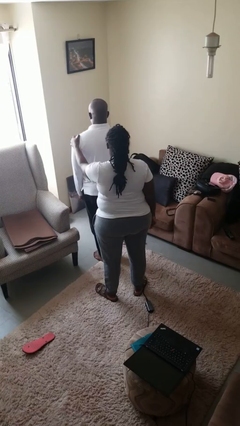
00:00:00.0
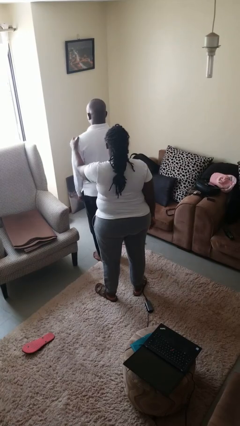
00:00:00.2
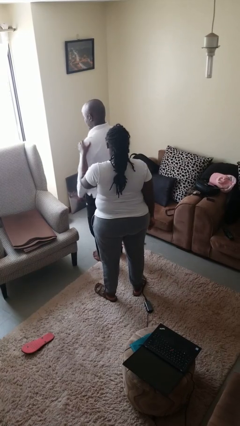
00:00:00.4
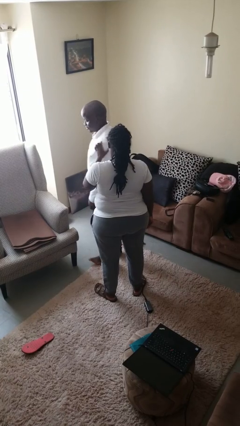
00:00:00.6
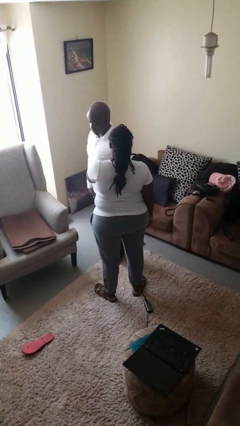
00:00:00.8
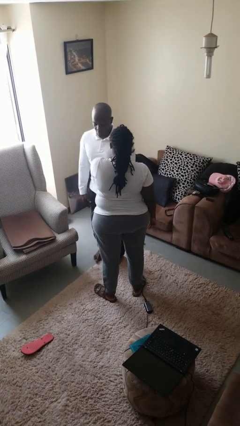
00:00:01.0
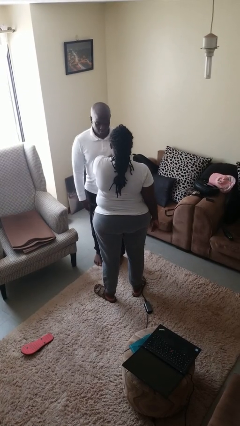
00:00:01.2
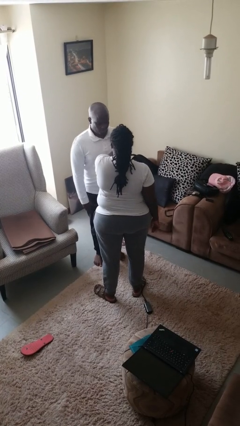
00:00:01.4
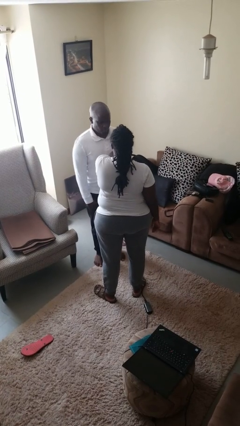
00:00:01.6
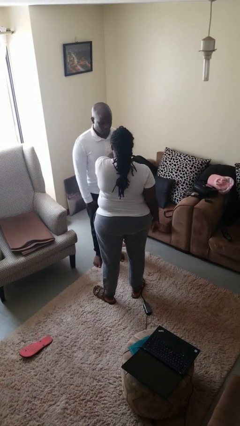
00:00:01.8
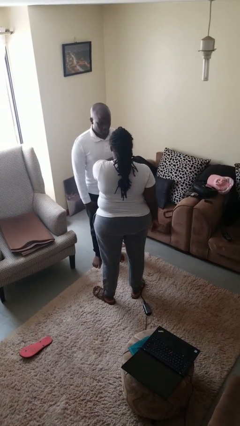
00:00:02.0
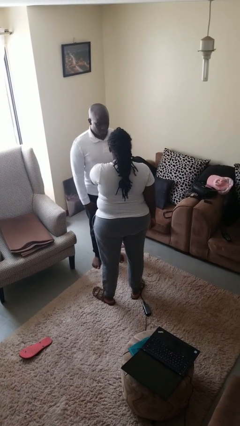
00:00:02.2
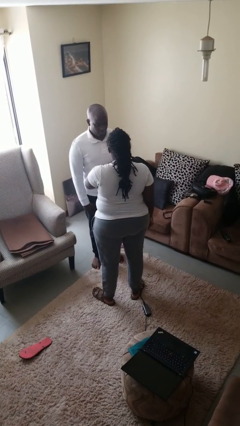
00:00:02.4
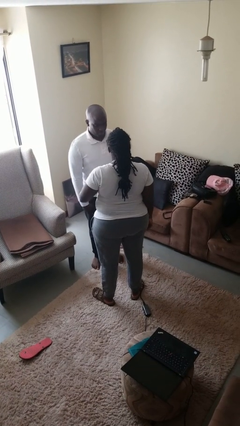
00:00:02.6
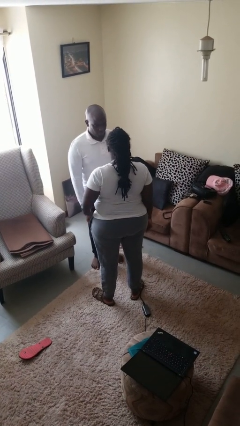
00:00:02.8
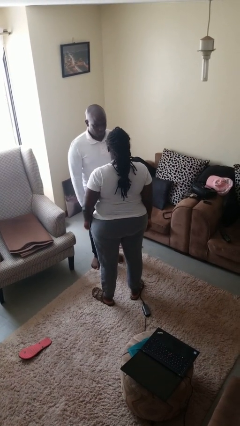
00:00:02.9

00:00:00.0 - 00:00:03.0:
person spins person around

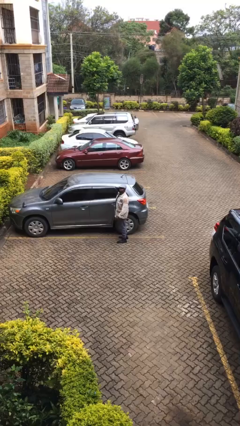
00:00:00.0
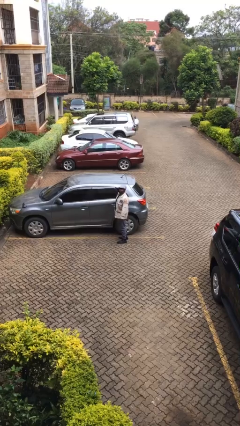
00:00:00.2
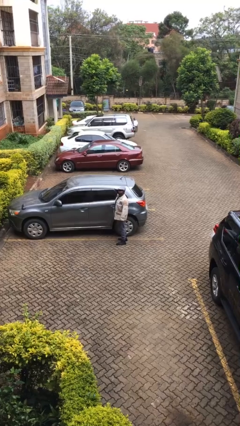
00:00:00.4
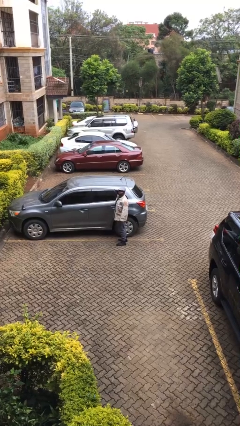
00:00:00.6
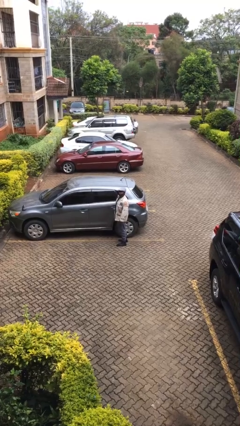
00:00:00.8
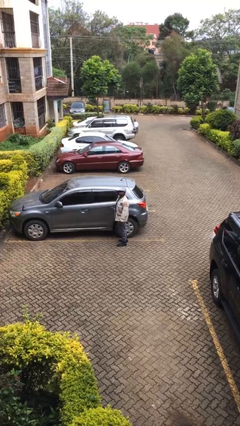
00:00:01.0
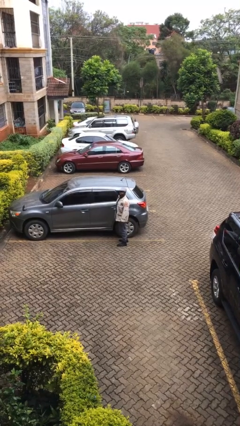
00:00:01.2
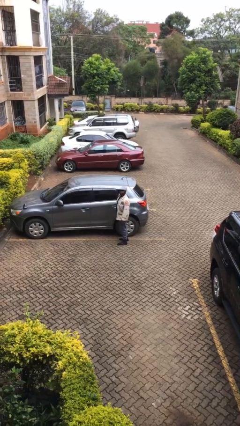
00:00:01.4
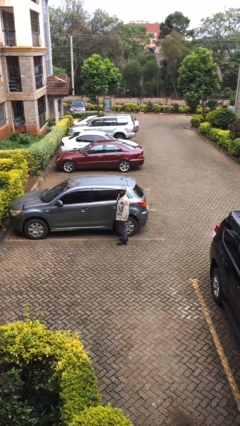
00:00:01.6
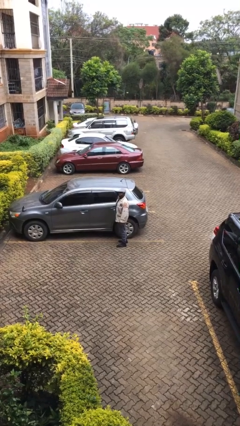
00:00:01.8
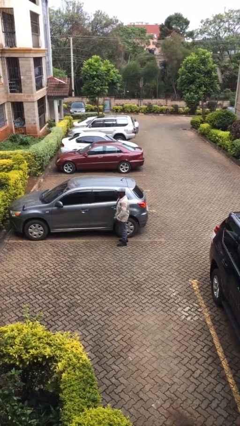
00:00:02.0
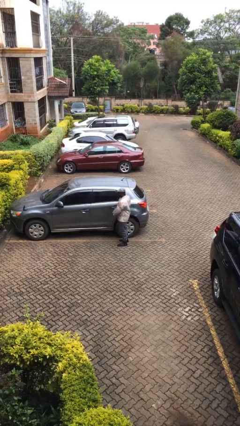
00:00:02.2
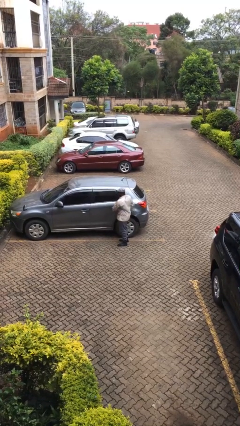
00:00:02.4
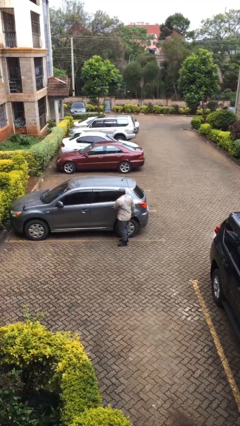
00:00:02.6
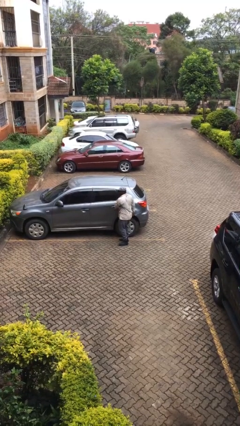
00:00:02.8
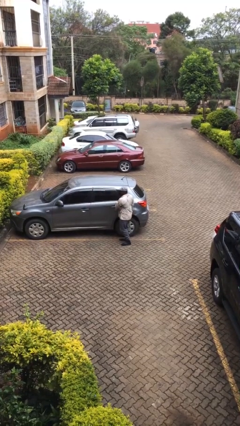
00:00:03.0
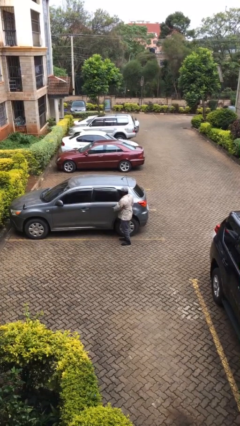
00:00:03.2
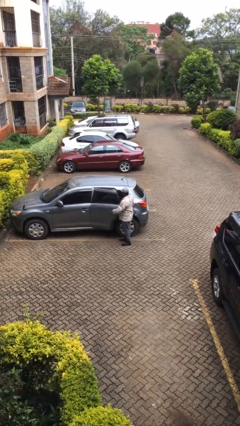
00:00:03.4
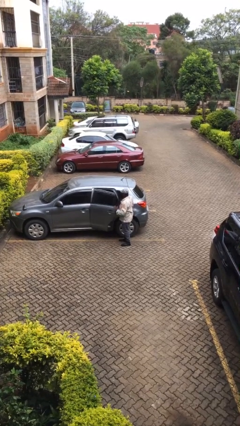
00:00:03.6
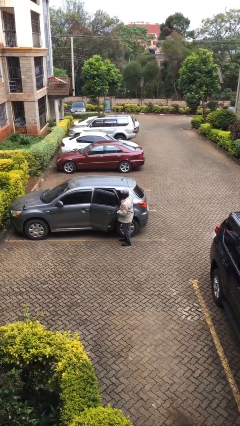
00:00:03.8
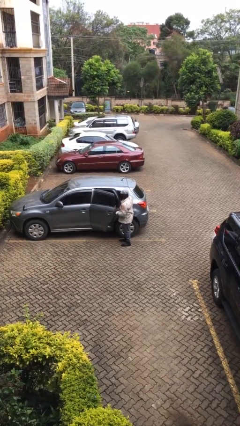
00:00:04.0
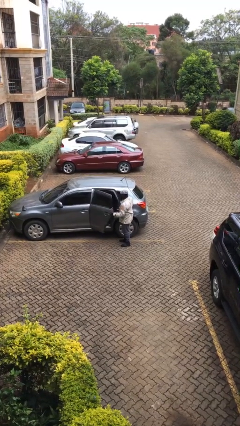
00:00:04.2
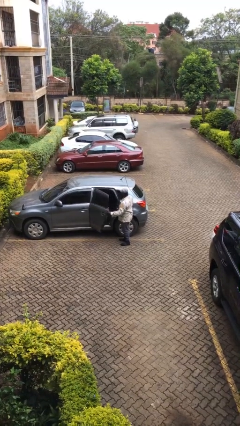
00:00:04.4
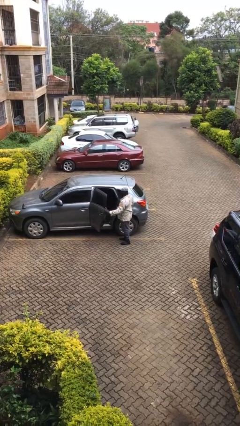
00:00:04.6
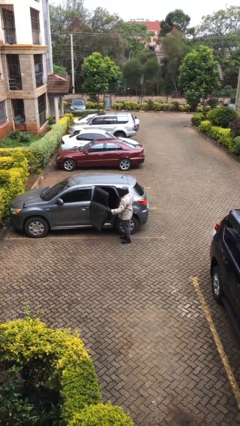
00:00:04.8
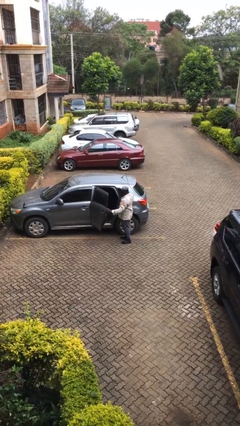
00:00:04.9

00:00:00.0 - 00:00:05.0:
person opens car door

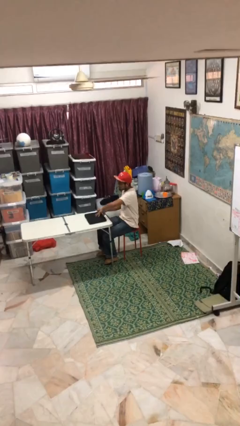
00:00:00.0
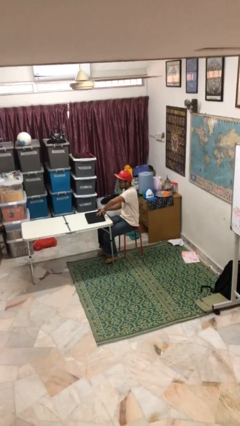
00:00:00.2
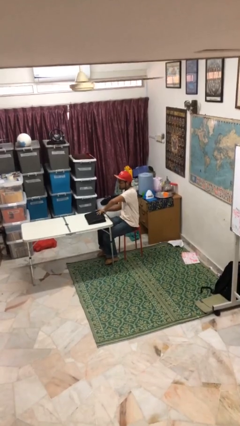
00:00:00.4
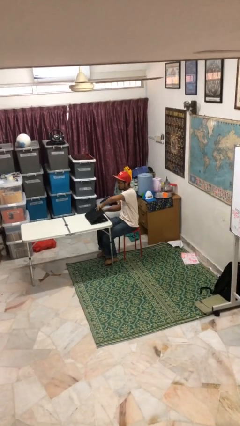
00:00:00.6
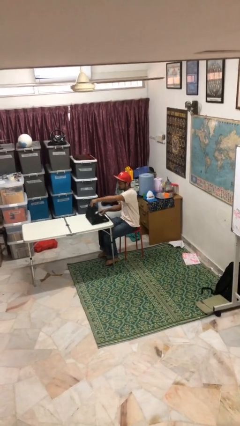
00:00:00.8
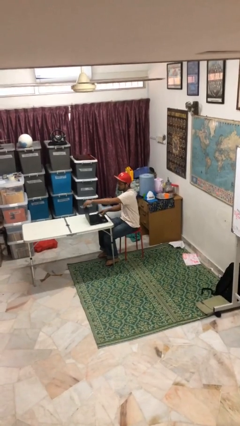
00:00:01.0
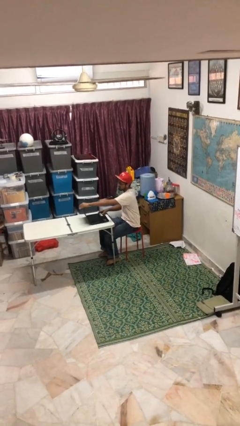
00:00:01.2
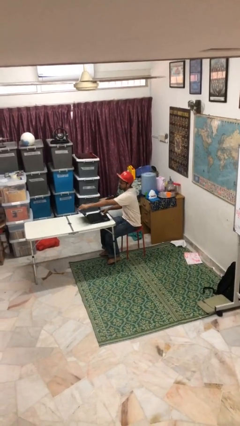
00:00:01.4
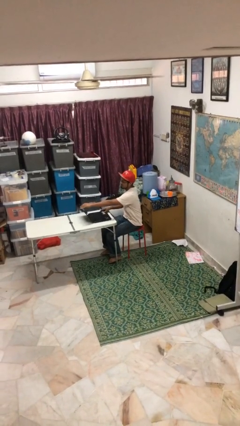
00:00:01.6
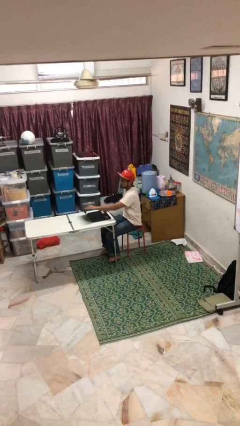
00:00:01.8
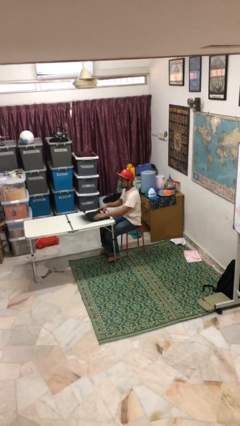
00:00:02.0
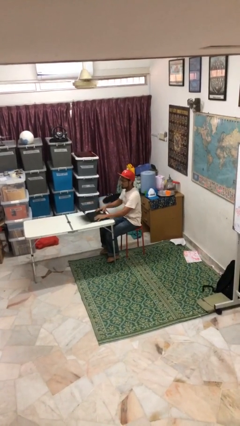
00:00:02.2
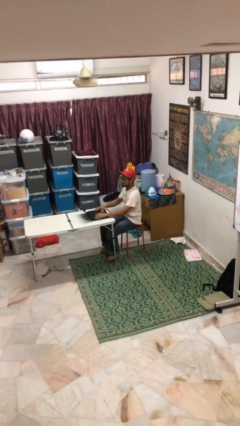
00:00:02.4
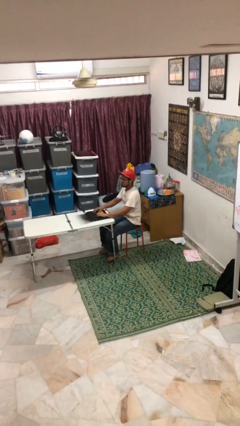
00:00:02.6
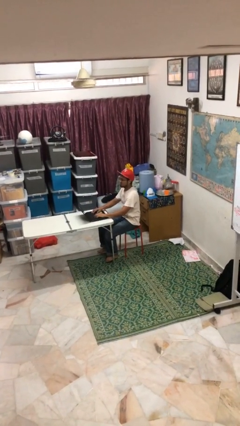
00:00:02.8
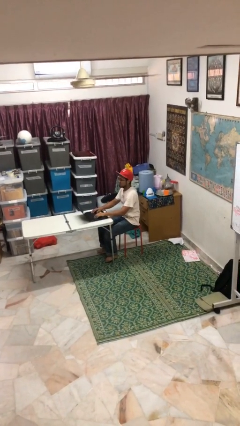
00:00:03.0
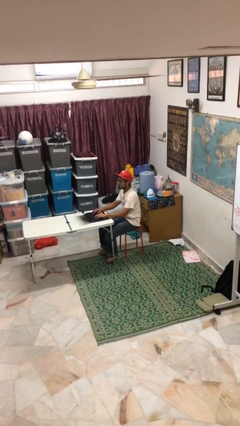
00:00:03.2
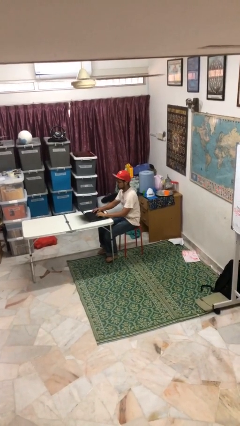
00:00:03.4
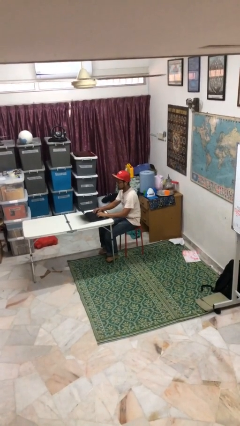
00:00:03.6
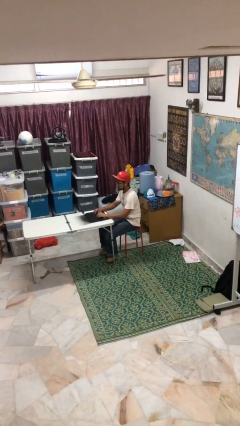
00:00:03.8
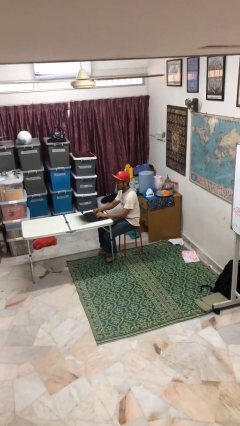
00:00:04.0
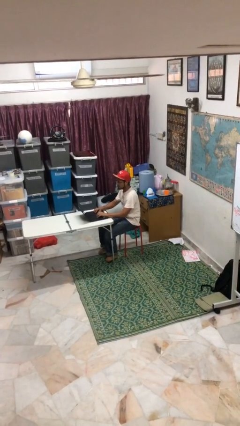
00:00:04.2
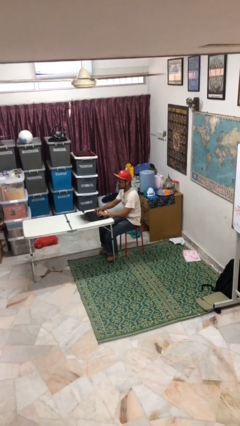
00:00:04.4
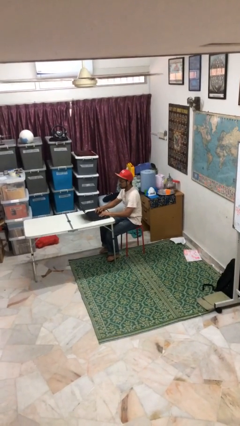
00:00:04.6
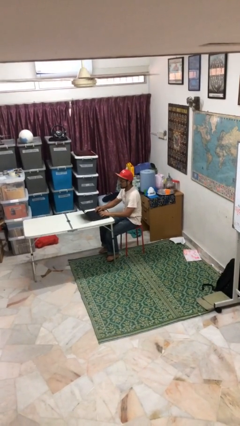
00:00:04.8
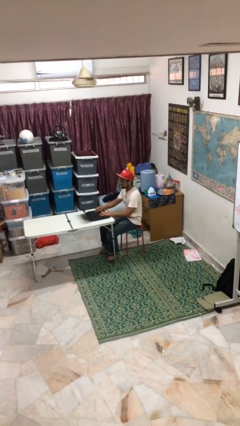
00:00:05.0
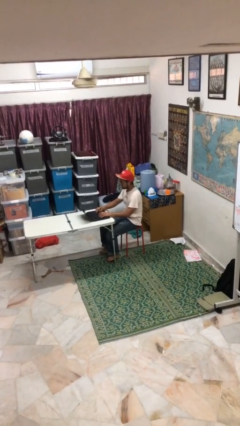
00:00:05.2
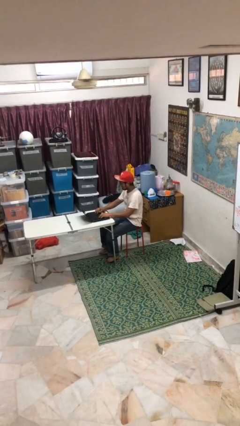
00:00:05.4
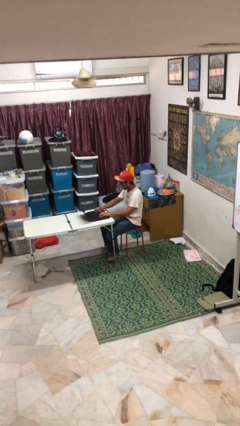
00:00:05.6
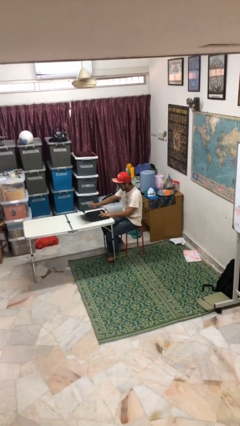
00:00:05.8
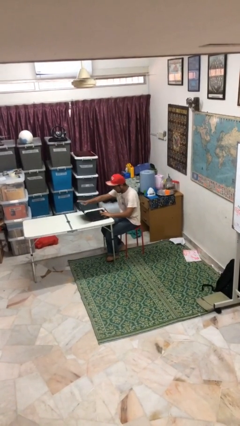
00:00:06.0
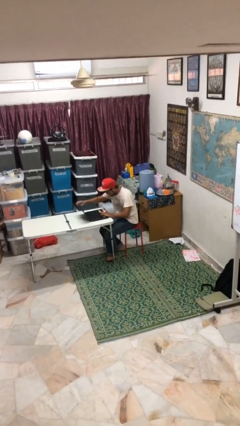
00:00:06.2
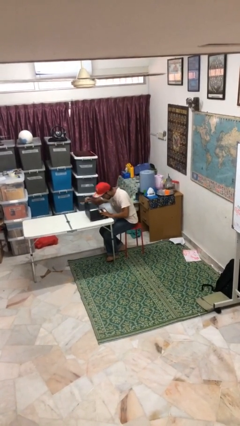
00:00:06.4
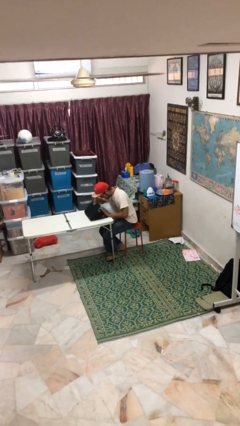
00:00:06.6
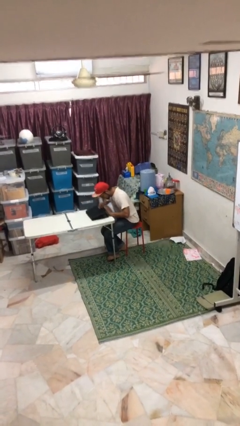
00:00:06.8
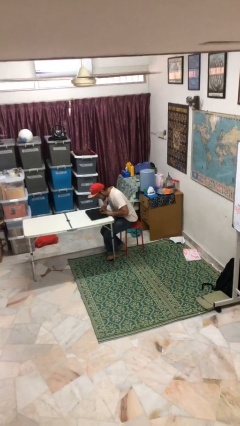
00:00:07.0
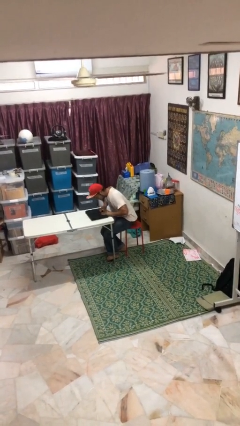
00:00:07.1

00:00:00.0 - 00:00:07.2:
person interacts with laptop

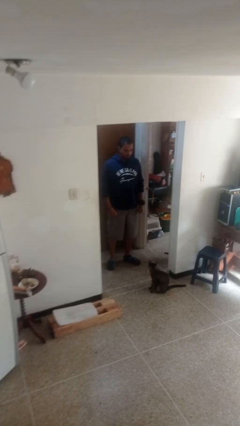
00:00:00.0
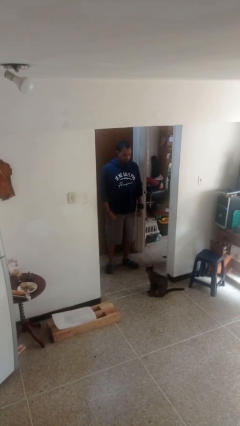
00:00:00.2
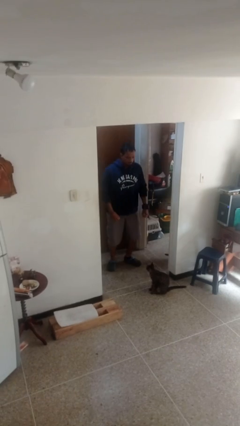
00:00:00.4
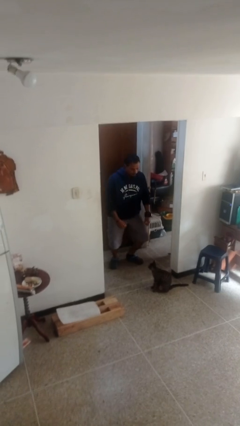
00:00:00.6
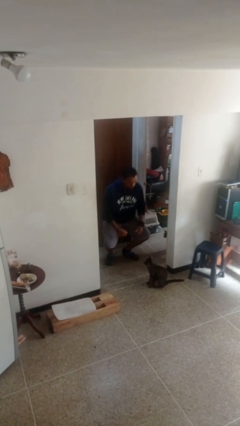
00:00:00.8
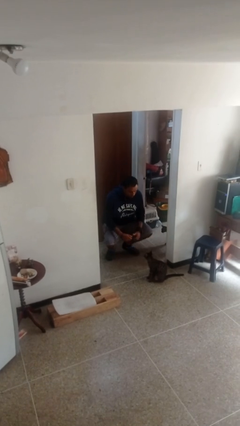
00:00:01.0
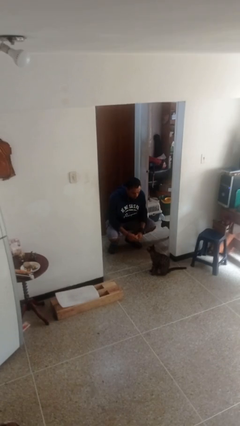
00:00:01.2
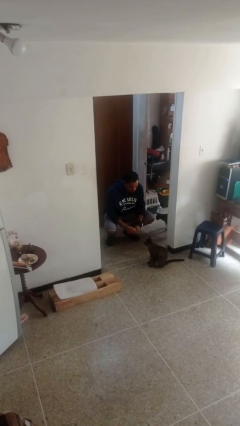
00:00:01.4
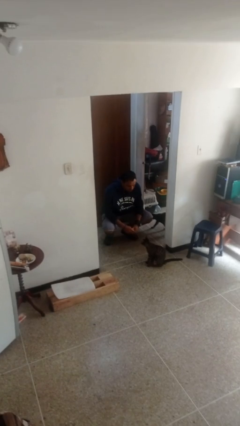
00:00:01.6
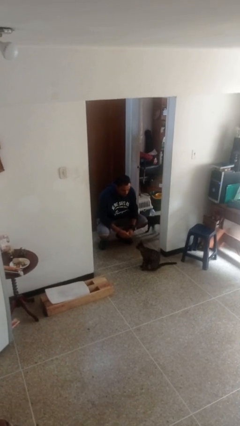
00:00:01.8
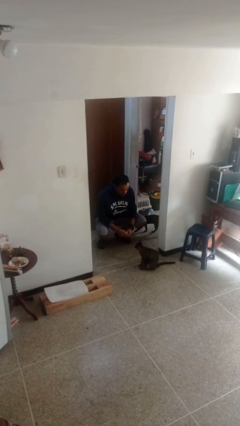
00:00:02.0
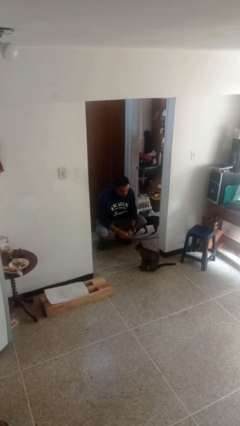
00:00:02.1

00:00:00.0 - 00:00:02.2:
person squats
